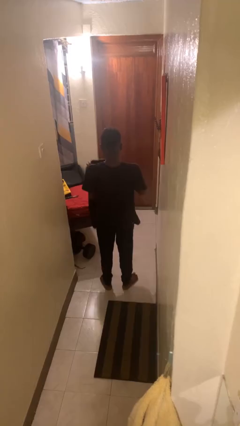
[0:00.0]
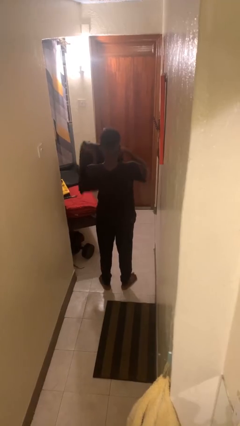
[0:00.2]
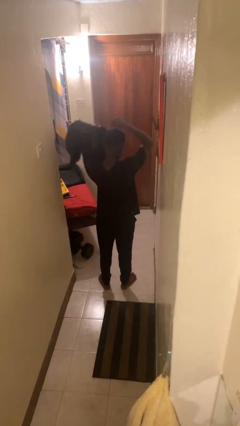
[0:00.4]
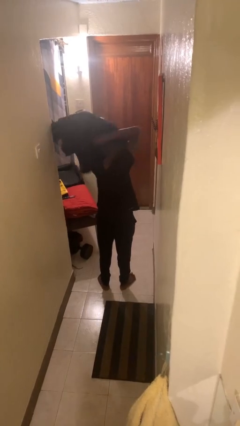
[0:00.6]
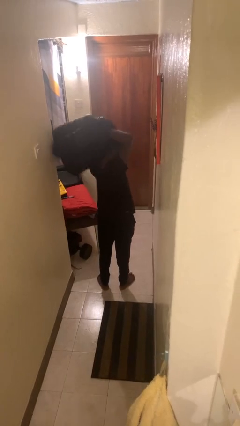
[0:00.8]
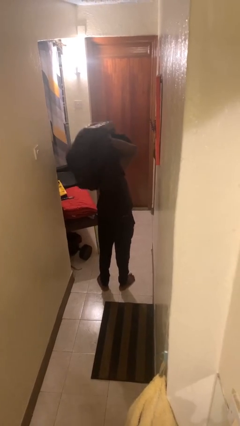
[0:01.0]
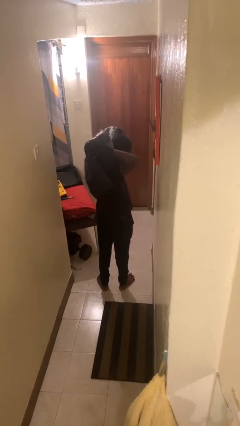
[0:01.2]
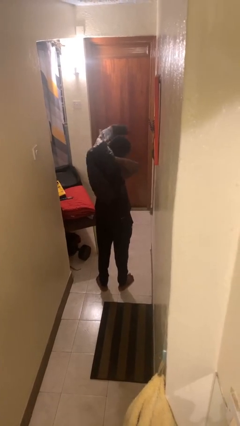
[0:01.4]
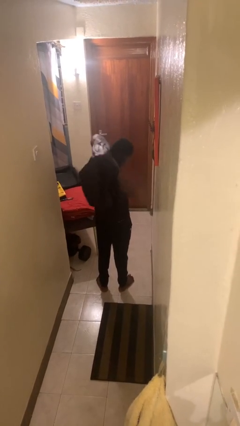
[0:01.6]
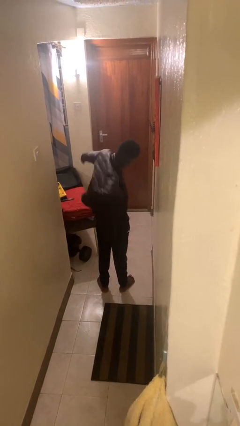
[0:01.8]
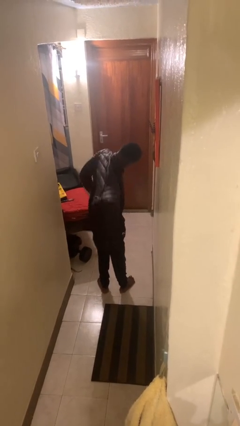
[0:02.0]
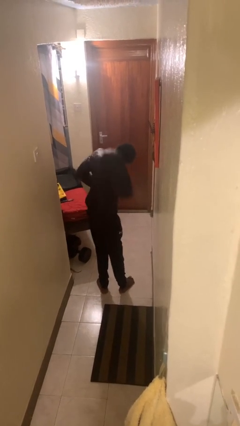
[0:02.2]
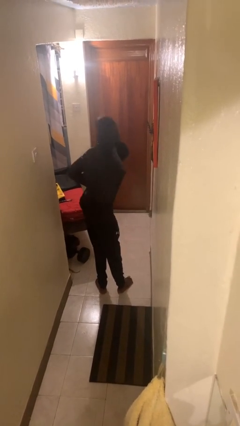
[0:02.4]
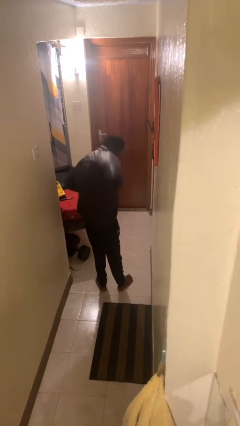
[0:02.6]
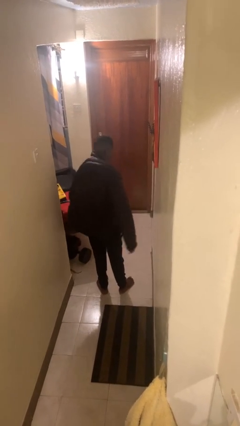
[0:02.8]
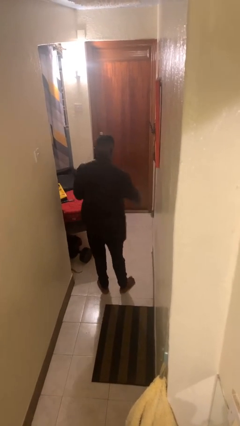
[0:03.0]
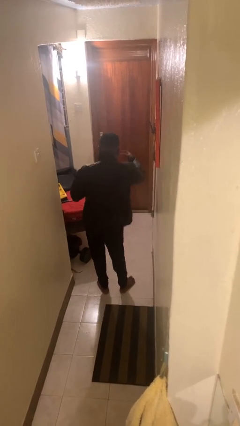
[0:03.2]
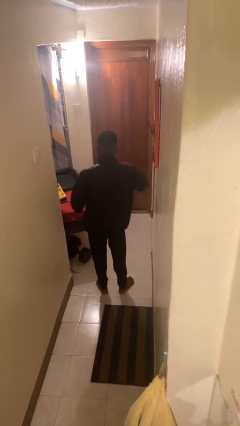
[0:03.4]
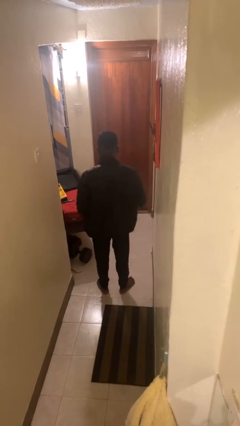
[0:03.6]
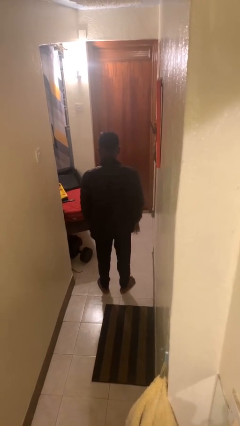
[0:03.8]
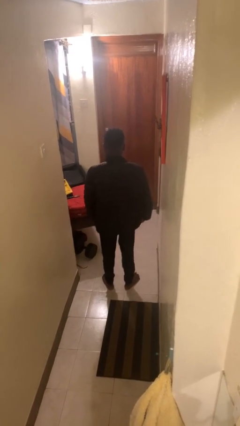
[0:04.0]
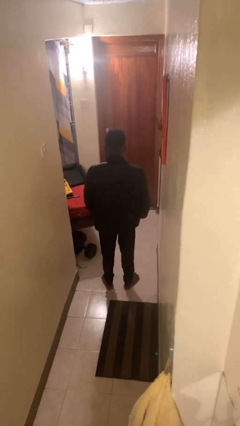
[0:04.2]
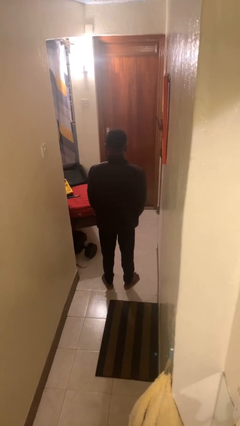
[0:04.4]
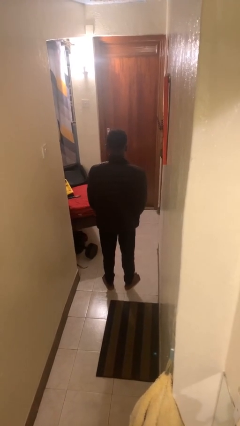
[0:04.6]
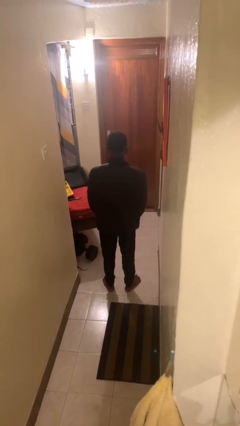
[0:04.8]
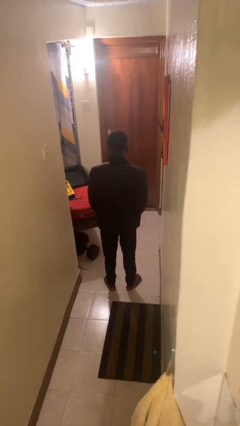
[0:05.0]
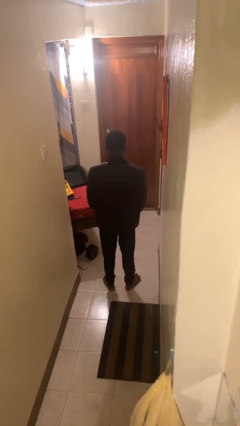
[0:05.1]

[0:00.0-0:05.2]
person puts on jacket

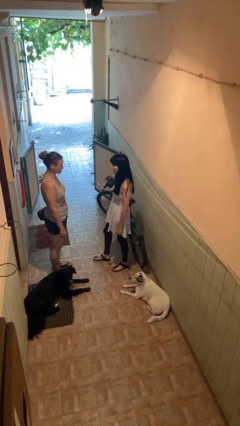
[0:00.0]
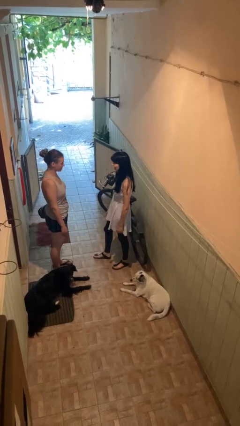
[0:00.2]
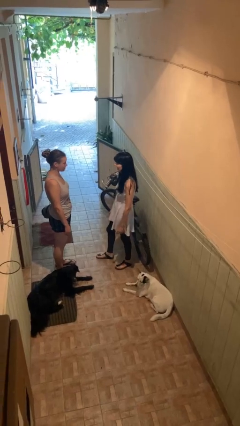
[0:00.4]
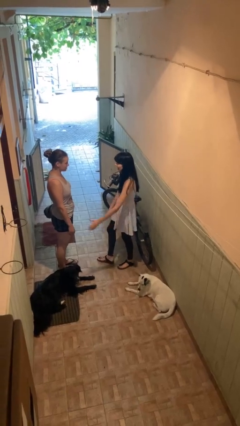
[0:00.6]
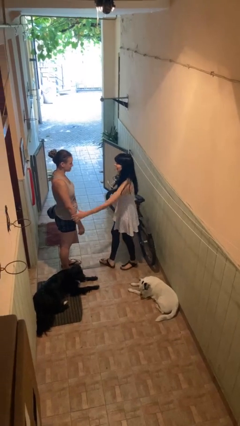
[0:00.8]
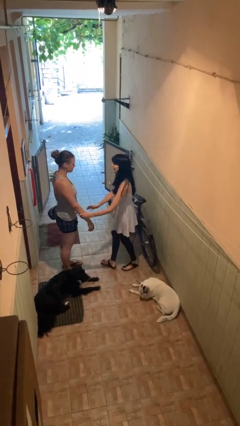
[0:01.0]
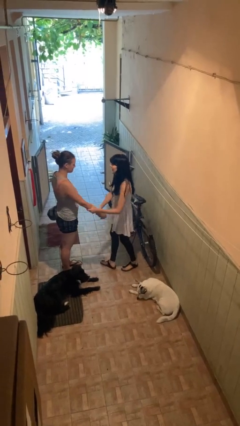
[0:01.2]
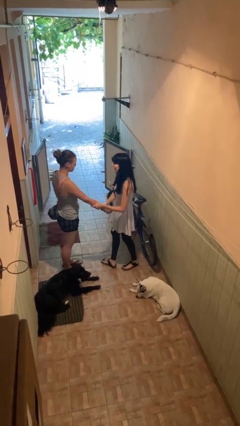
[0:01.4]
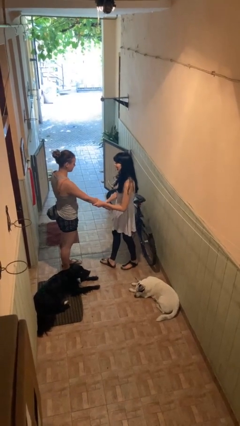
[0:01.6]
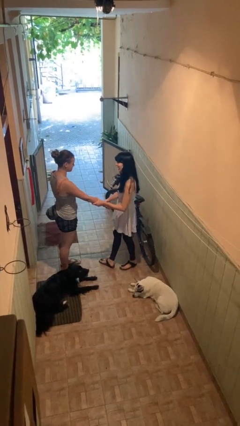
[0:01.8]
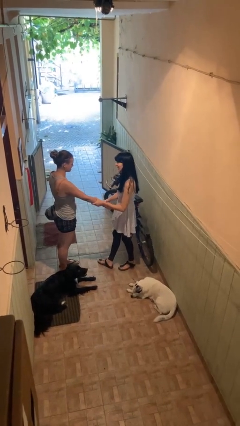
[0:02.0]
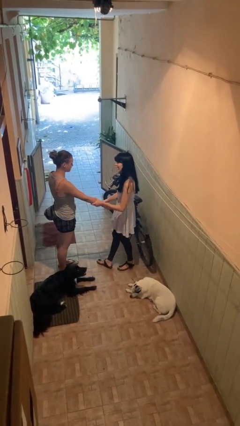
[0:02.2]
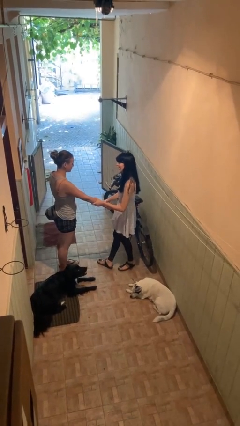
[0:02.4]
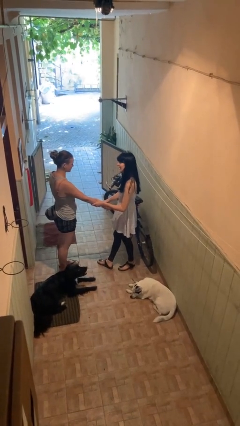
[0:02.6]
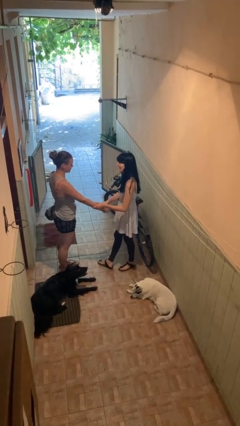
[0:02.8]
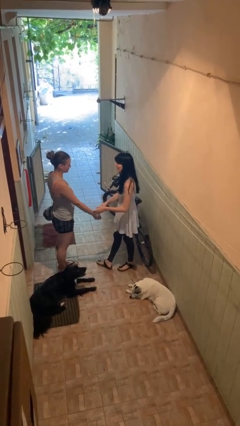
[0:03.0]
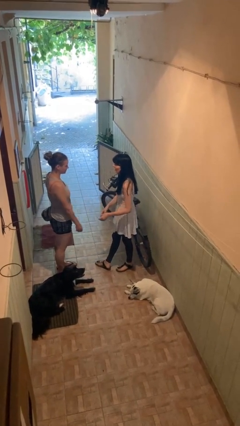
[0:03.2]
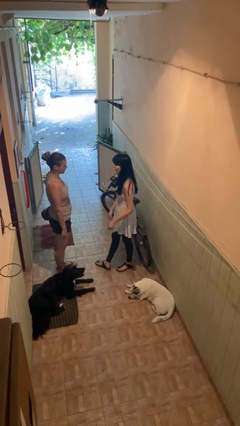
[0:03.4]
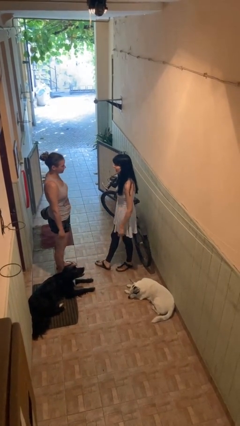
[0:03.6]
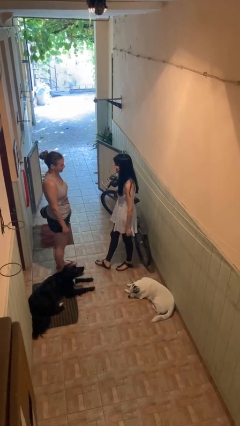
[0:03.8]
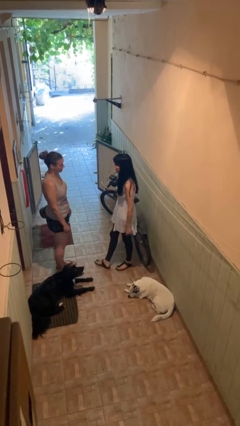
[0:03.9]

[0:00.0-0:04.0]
person grabs person by forearm

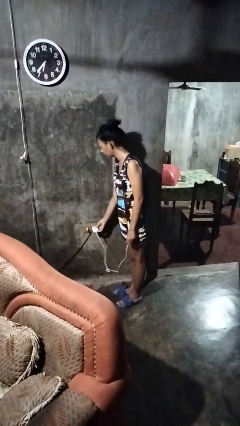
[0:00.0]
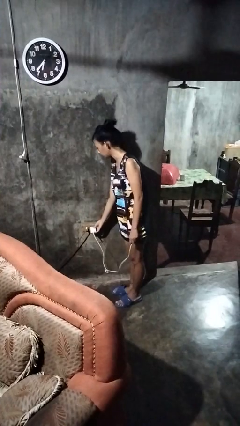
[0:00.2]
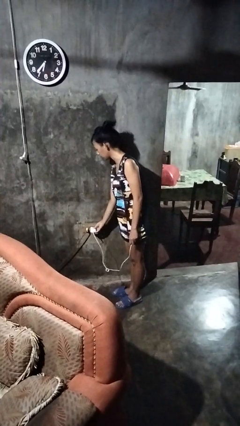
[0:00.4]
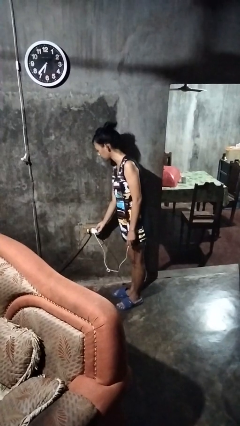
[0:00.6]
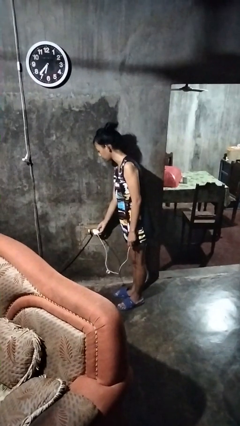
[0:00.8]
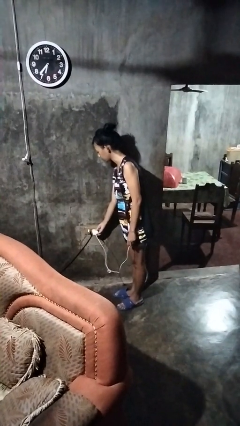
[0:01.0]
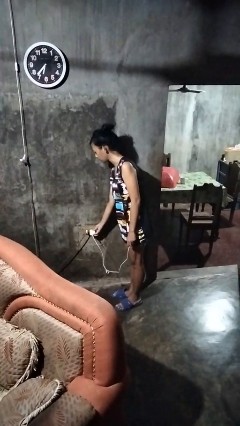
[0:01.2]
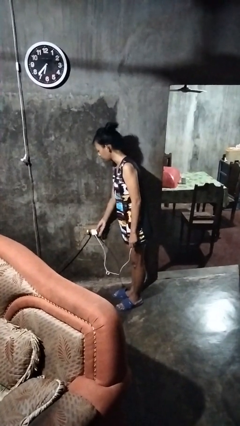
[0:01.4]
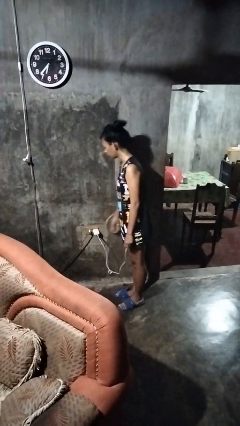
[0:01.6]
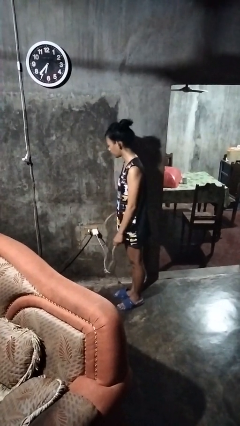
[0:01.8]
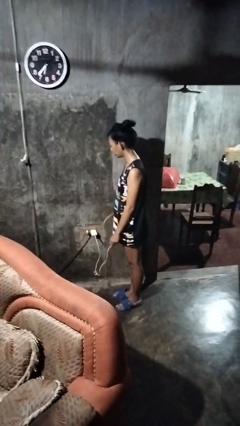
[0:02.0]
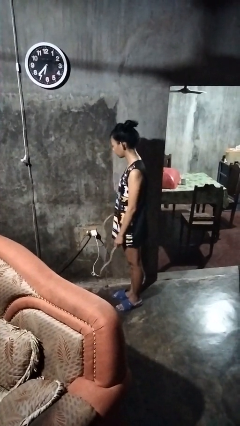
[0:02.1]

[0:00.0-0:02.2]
person plugs into electrical socket

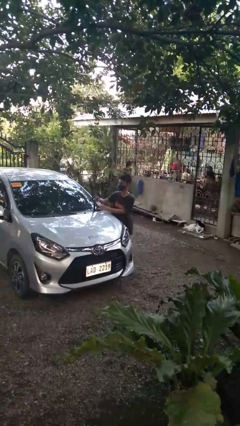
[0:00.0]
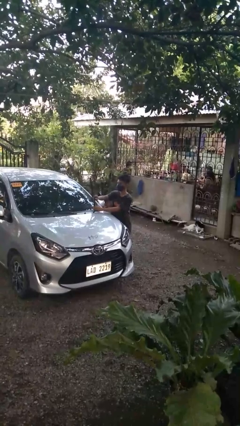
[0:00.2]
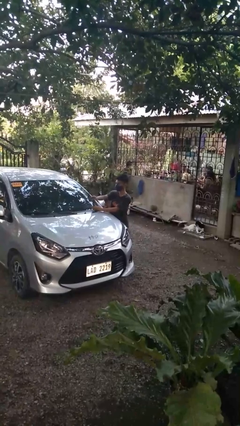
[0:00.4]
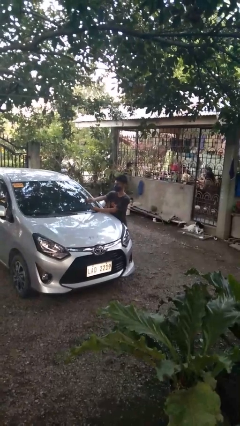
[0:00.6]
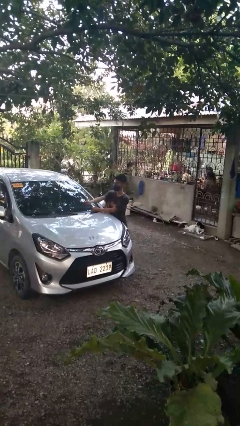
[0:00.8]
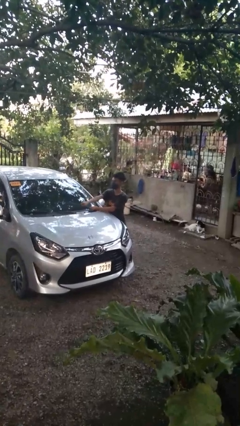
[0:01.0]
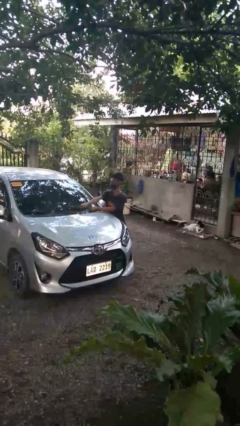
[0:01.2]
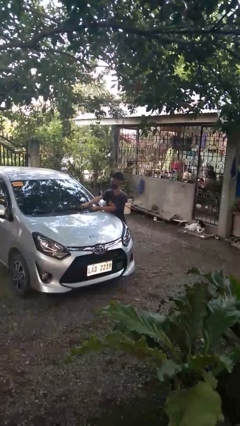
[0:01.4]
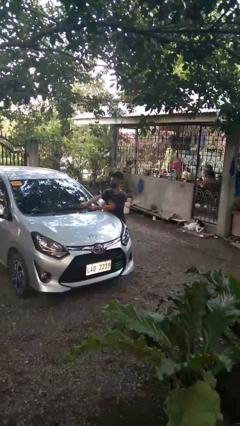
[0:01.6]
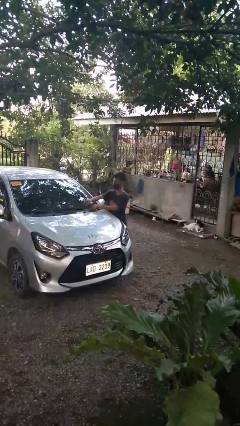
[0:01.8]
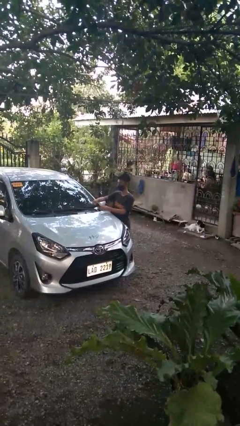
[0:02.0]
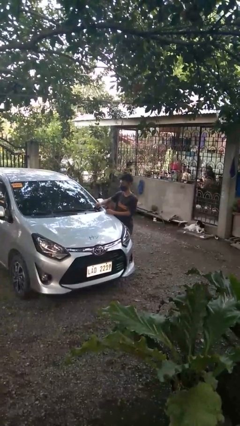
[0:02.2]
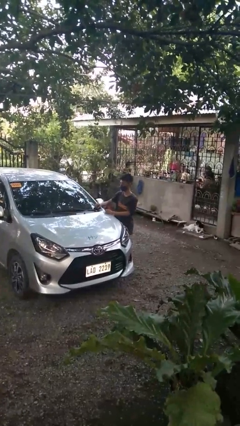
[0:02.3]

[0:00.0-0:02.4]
person flips down car wipers

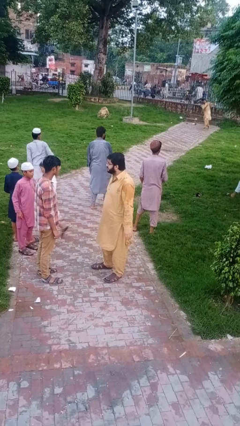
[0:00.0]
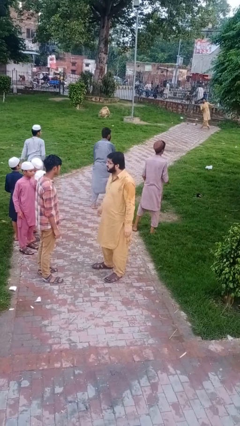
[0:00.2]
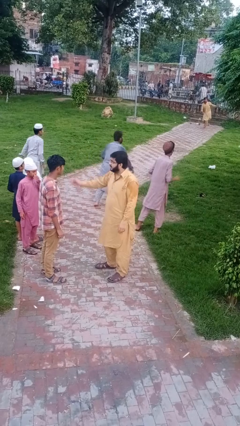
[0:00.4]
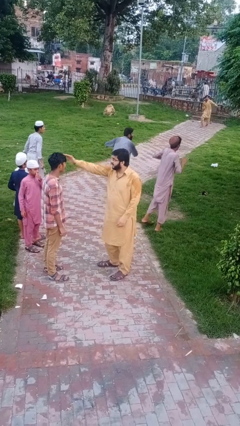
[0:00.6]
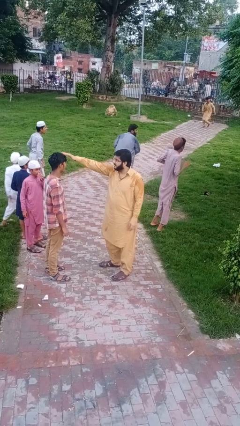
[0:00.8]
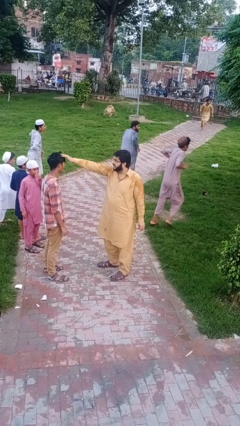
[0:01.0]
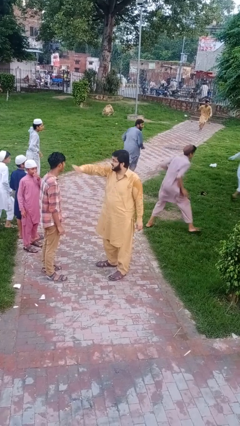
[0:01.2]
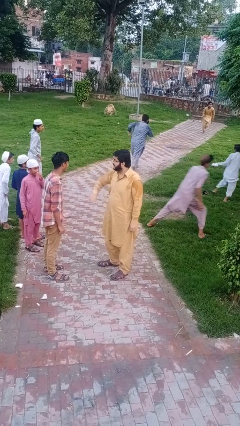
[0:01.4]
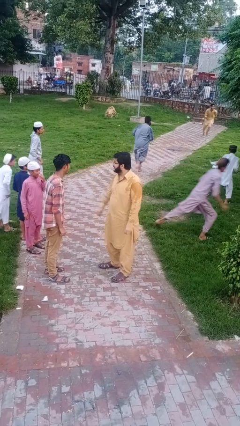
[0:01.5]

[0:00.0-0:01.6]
person grabs person by hair

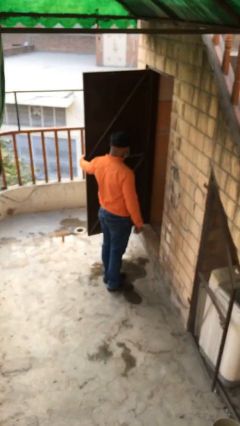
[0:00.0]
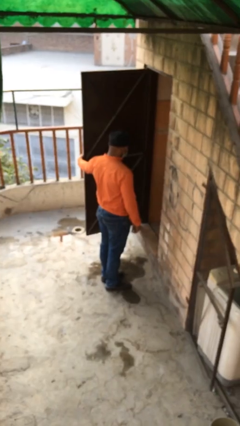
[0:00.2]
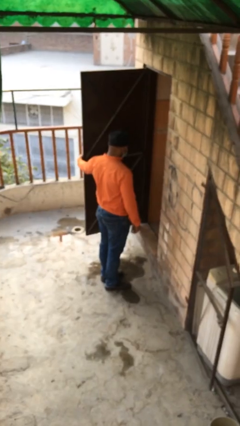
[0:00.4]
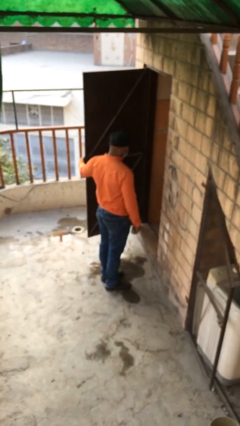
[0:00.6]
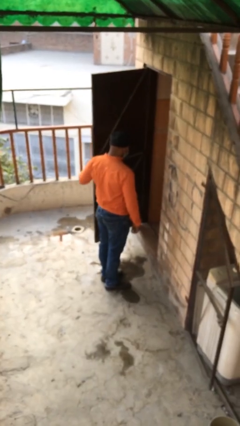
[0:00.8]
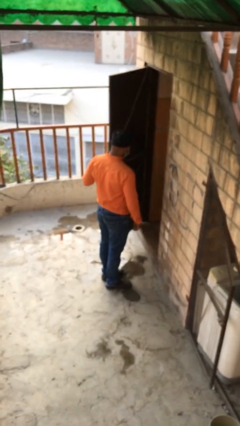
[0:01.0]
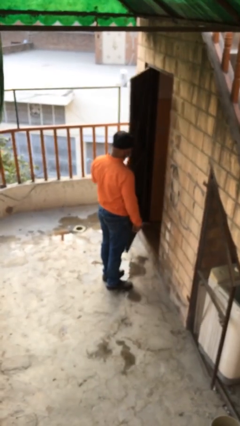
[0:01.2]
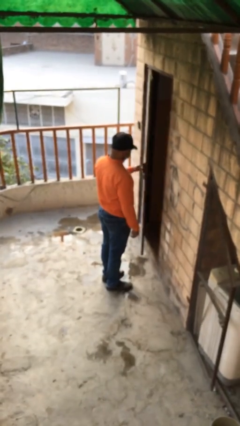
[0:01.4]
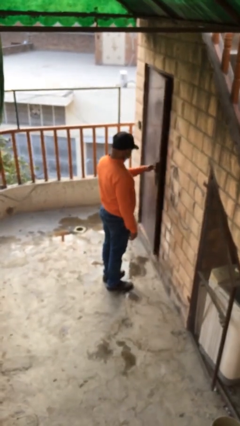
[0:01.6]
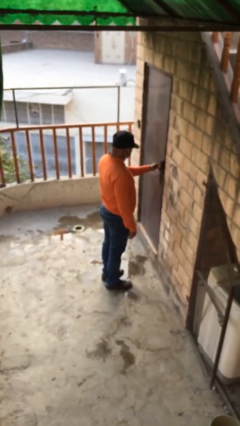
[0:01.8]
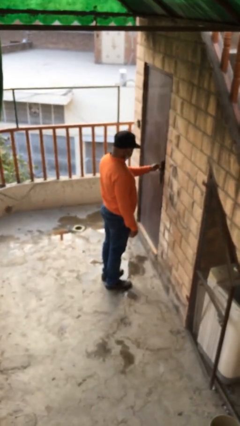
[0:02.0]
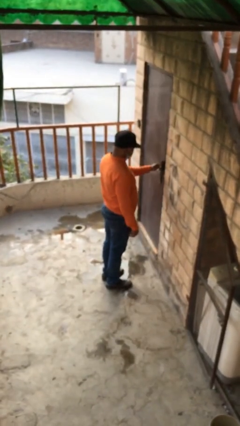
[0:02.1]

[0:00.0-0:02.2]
person closes facility door
